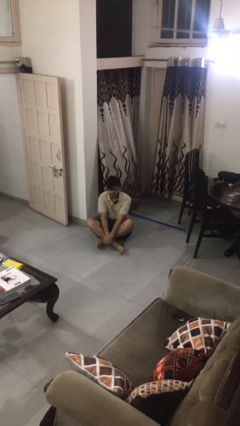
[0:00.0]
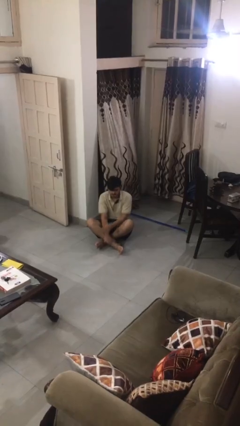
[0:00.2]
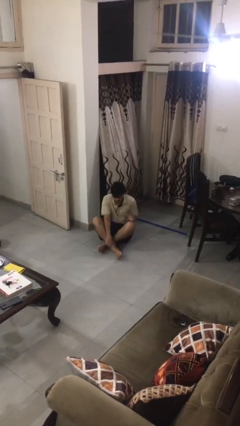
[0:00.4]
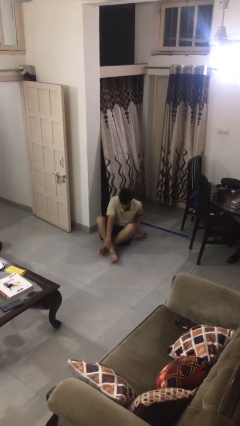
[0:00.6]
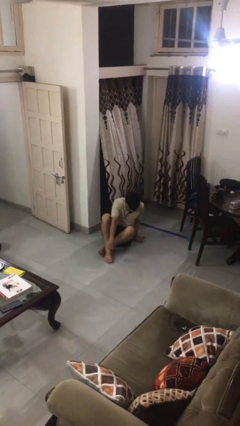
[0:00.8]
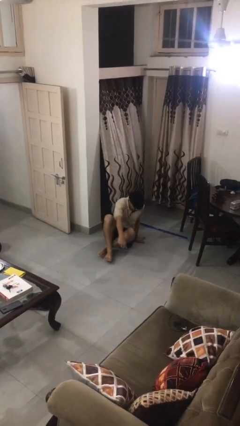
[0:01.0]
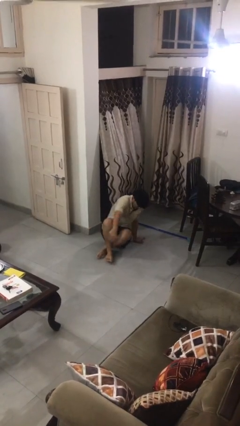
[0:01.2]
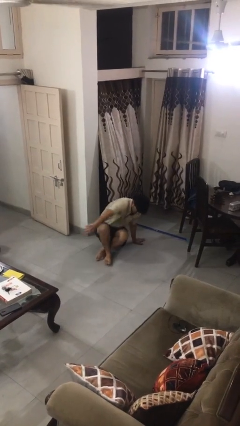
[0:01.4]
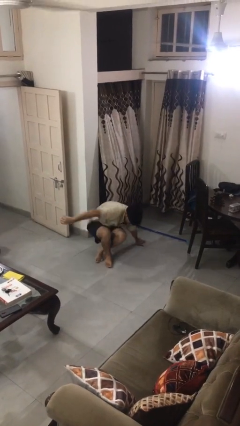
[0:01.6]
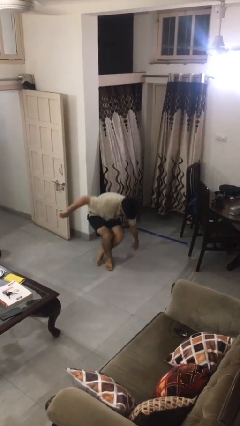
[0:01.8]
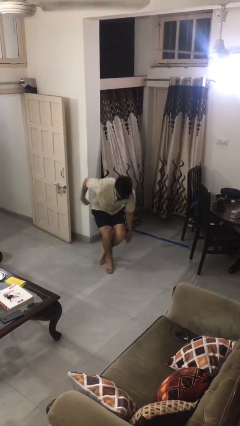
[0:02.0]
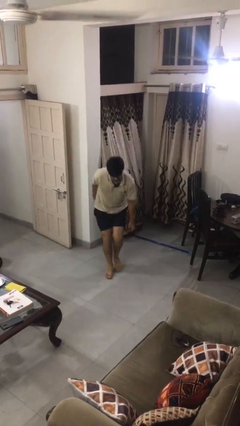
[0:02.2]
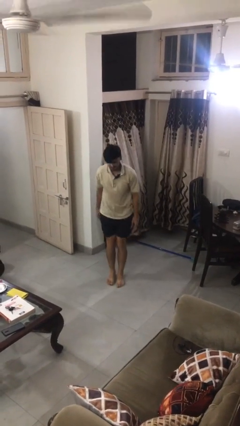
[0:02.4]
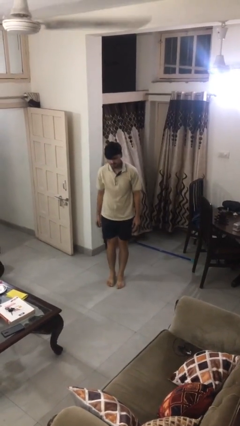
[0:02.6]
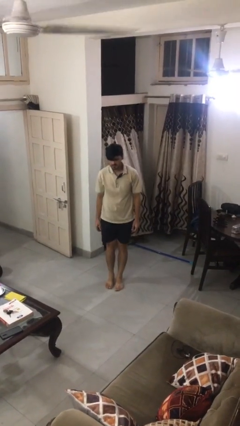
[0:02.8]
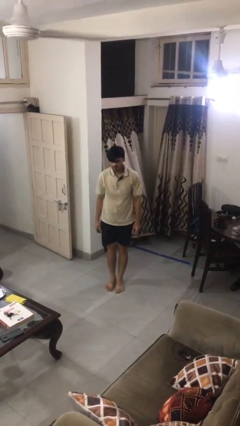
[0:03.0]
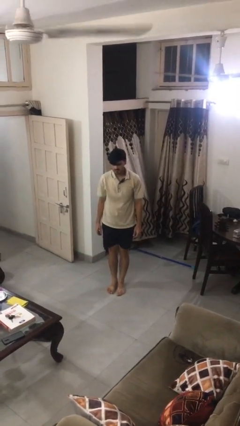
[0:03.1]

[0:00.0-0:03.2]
person stands up from floor

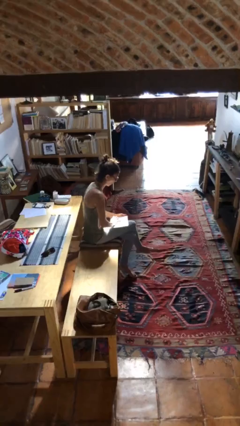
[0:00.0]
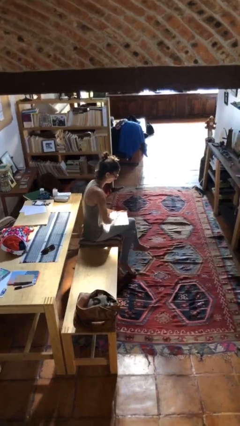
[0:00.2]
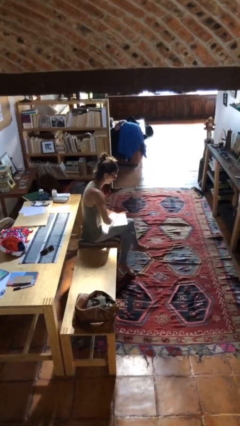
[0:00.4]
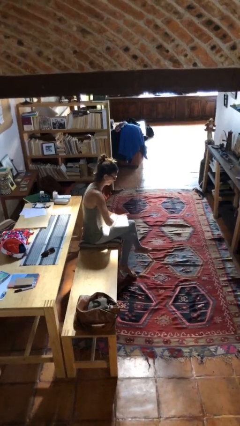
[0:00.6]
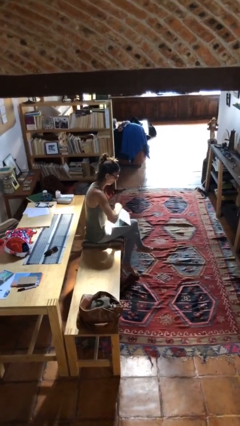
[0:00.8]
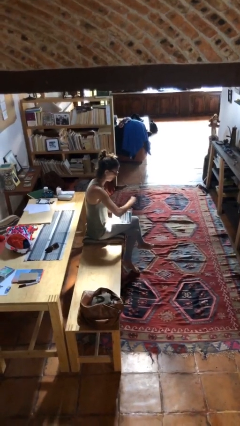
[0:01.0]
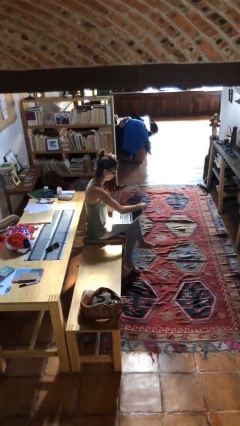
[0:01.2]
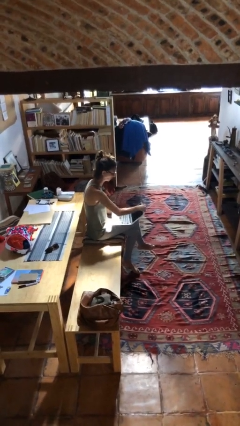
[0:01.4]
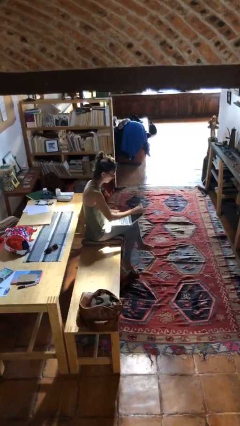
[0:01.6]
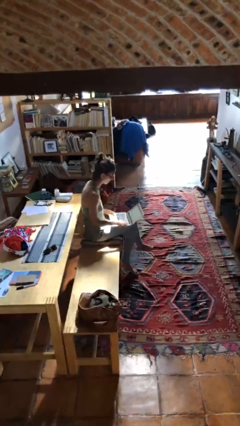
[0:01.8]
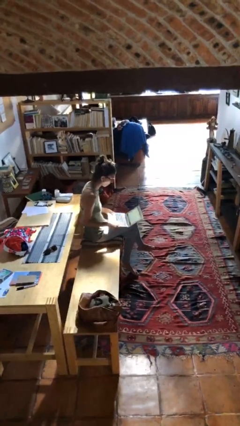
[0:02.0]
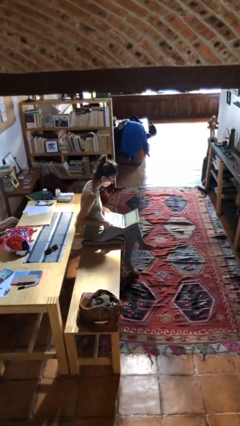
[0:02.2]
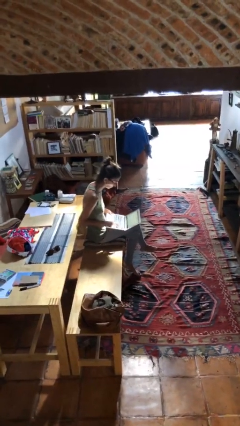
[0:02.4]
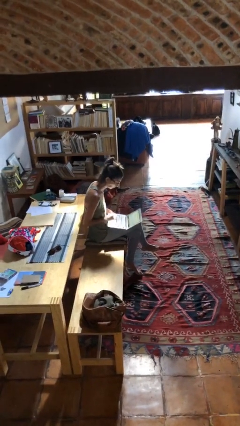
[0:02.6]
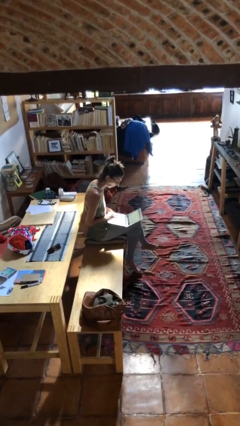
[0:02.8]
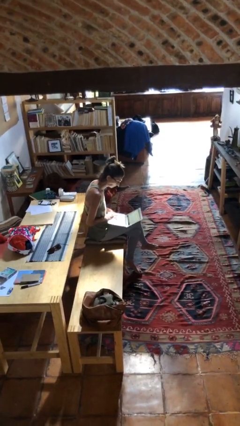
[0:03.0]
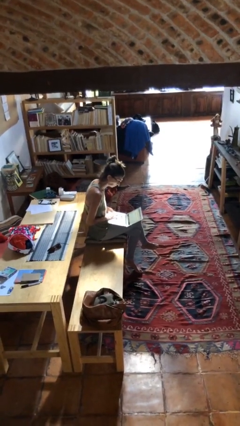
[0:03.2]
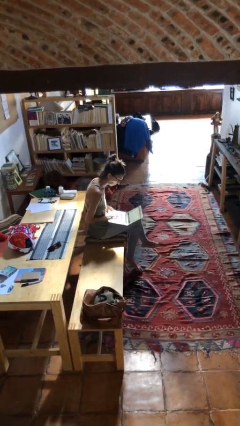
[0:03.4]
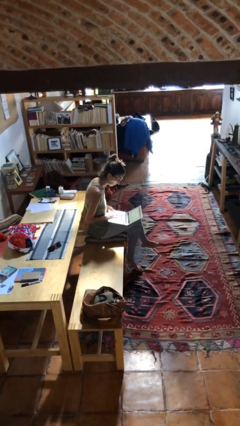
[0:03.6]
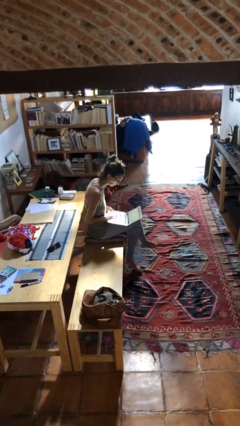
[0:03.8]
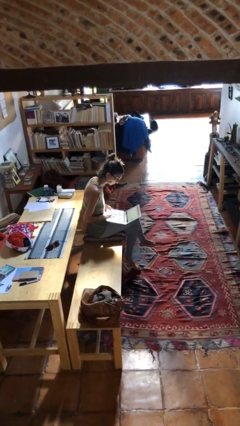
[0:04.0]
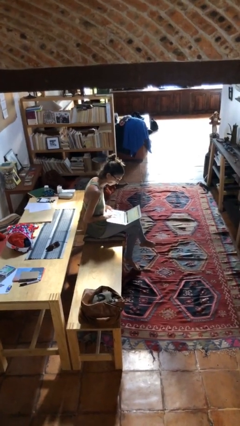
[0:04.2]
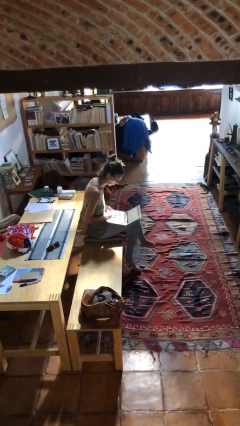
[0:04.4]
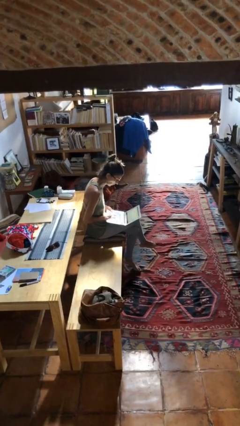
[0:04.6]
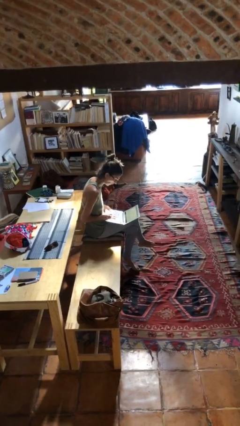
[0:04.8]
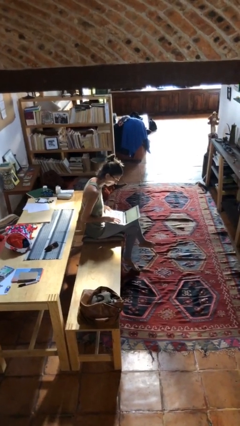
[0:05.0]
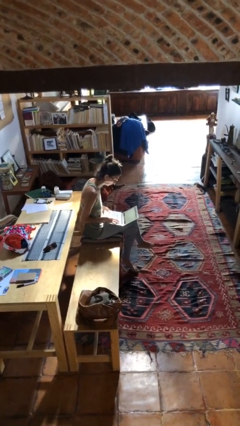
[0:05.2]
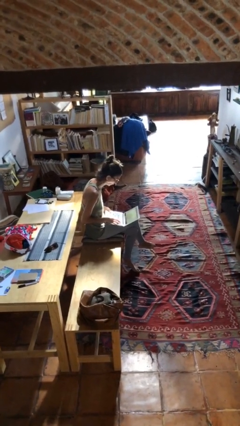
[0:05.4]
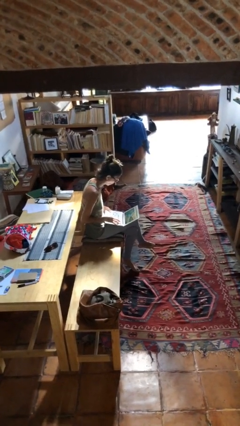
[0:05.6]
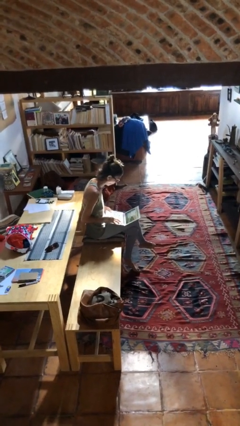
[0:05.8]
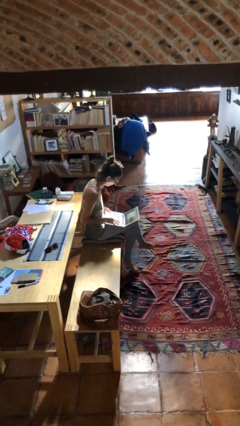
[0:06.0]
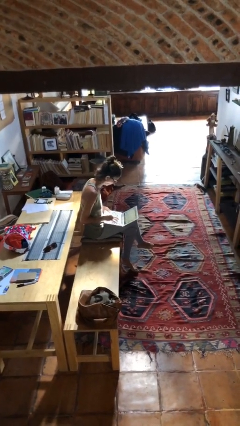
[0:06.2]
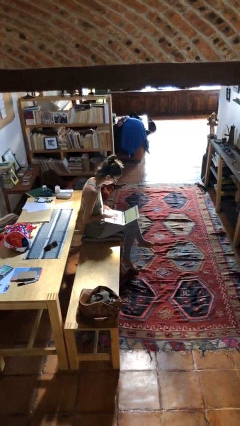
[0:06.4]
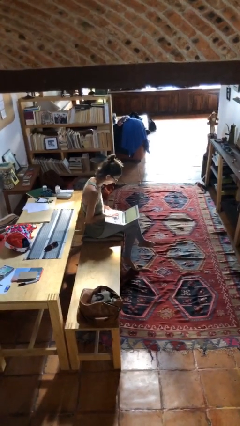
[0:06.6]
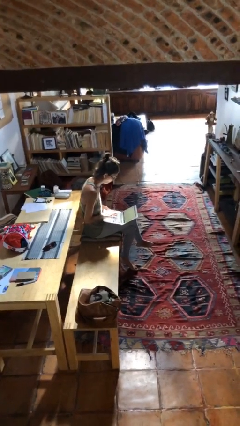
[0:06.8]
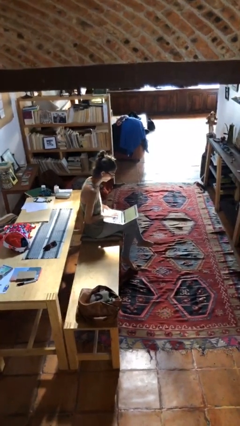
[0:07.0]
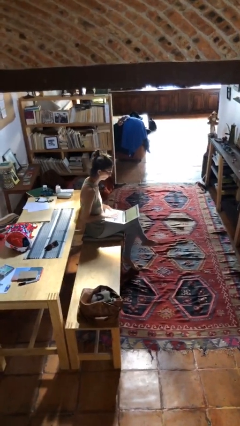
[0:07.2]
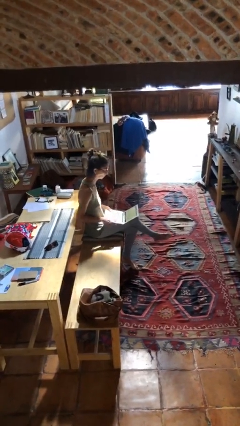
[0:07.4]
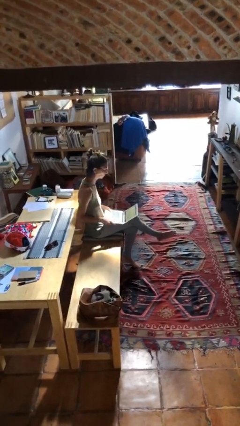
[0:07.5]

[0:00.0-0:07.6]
person interacts with laptop

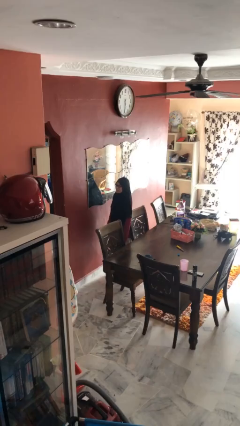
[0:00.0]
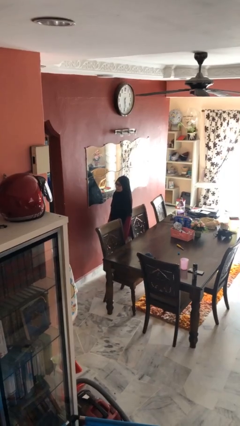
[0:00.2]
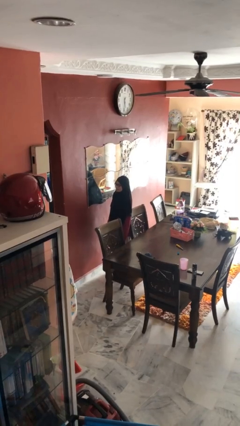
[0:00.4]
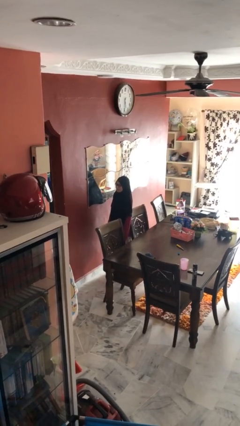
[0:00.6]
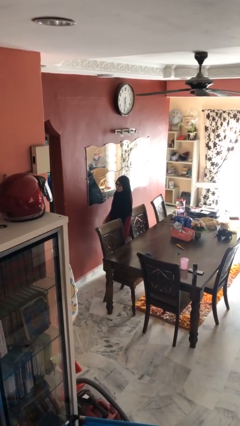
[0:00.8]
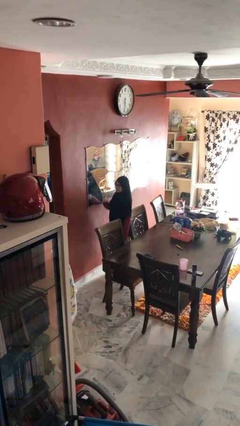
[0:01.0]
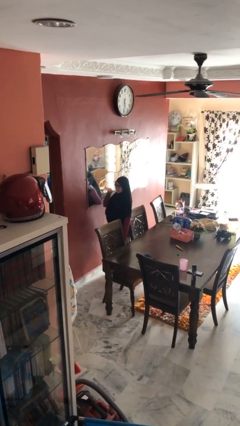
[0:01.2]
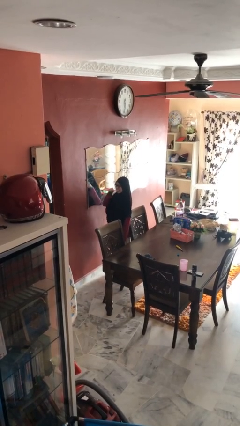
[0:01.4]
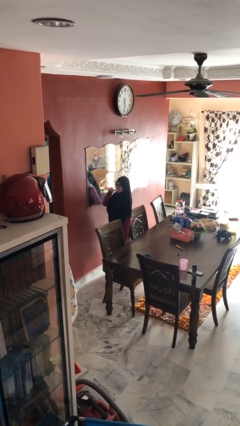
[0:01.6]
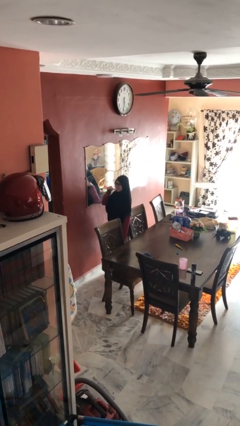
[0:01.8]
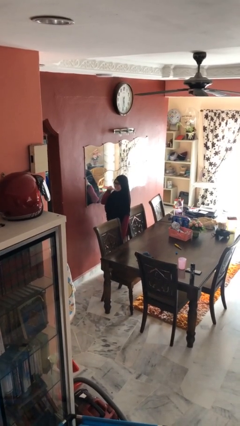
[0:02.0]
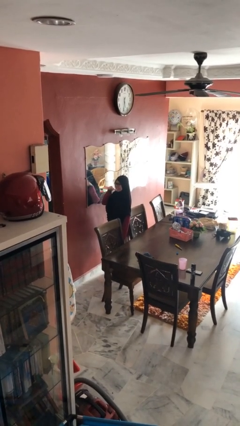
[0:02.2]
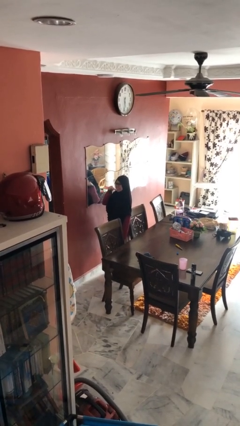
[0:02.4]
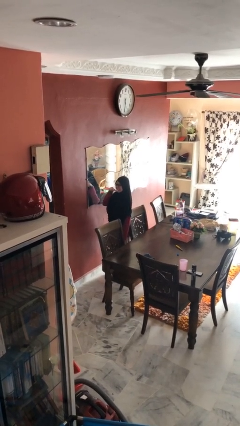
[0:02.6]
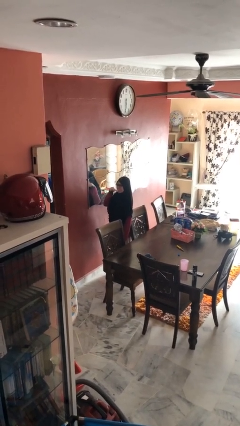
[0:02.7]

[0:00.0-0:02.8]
person brushes teeth

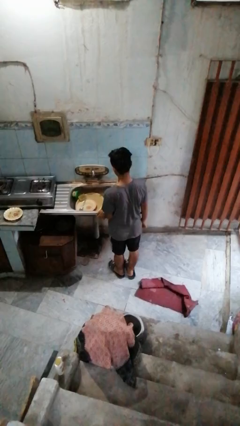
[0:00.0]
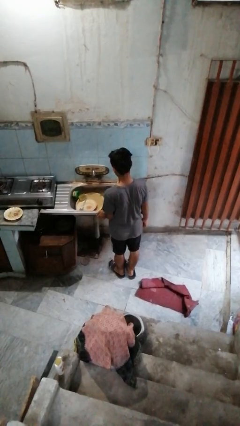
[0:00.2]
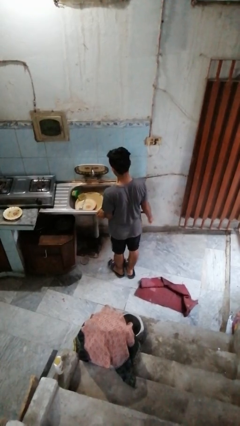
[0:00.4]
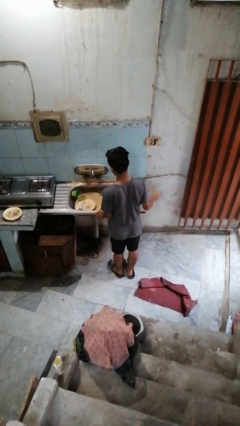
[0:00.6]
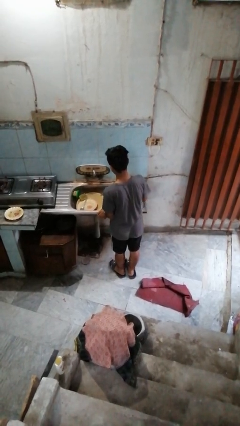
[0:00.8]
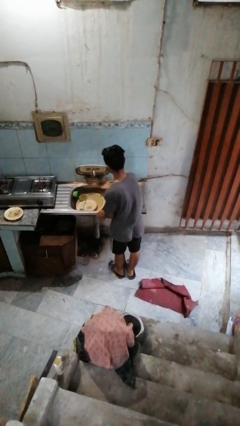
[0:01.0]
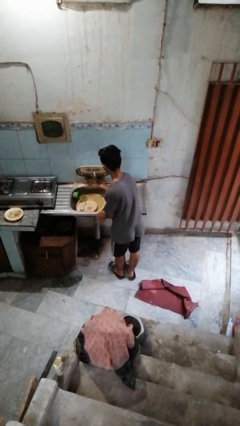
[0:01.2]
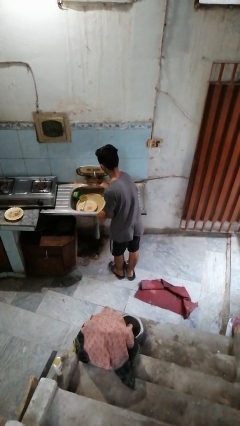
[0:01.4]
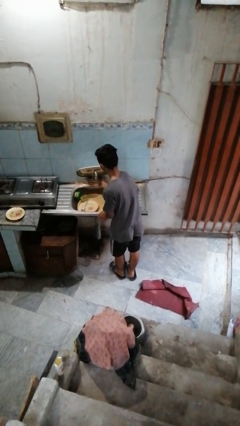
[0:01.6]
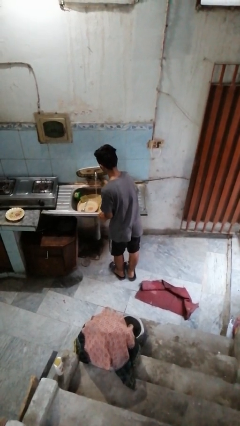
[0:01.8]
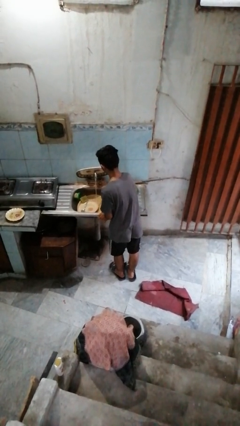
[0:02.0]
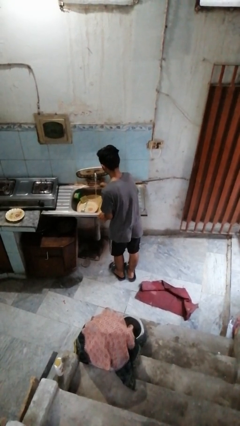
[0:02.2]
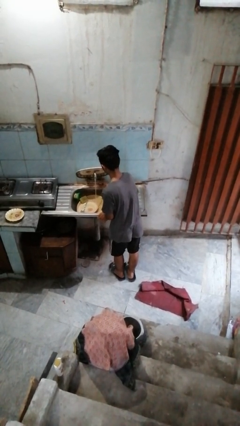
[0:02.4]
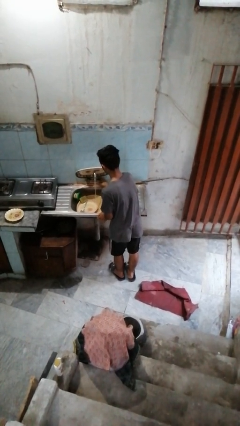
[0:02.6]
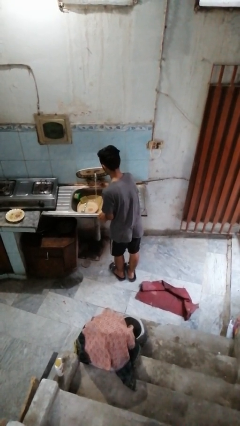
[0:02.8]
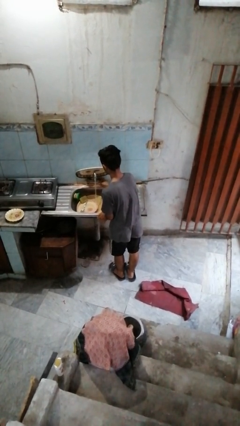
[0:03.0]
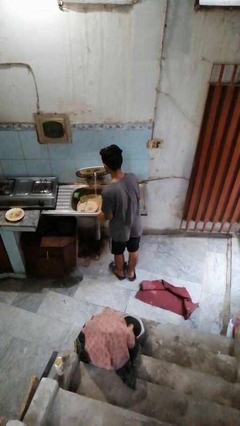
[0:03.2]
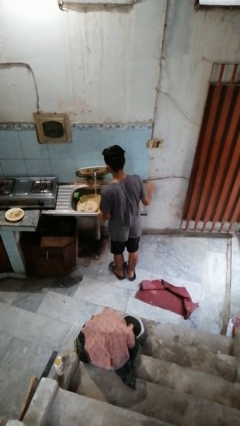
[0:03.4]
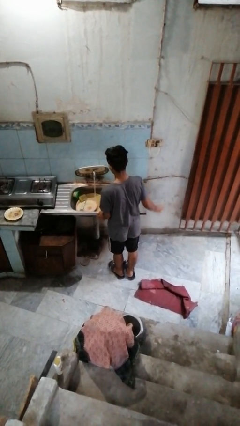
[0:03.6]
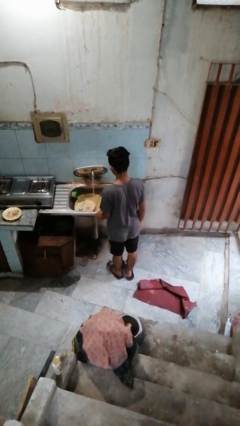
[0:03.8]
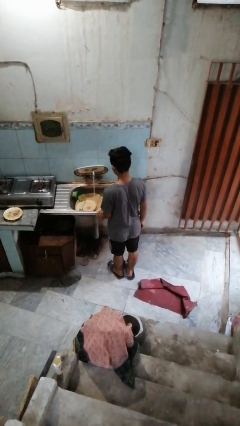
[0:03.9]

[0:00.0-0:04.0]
person turns on faucet
